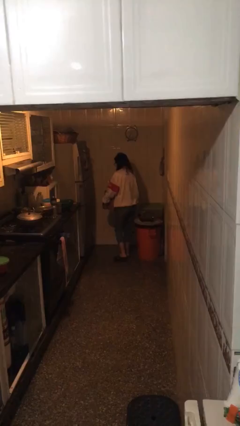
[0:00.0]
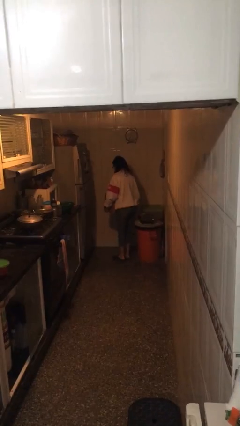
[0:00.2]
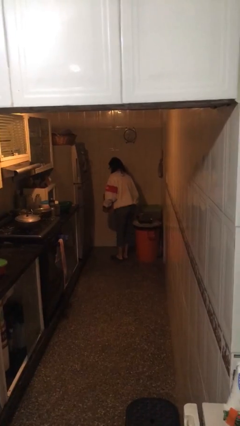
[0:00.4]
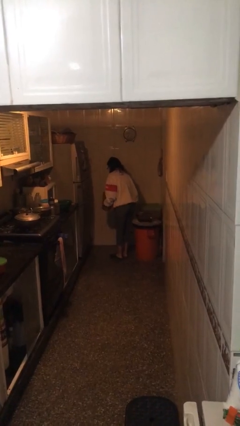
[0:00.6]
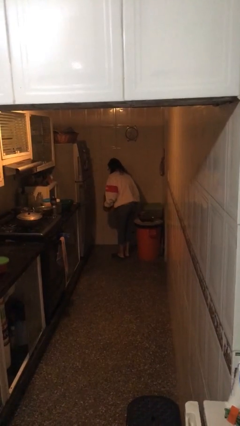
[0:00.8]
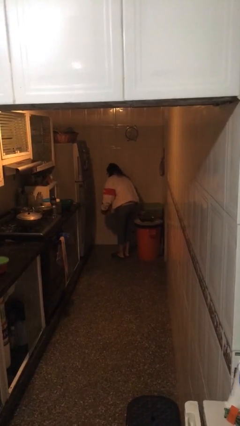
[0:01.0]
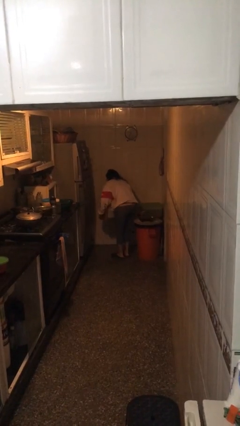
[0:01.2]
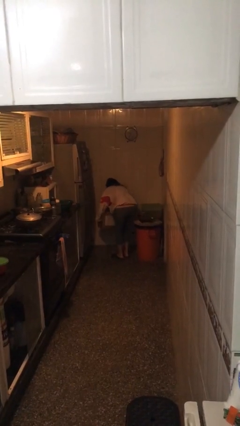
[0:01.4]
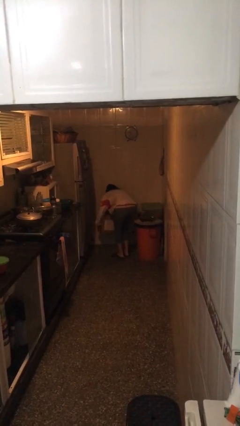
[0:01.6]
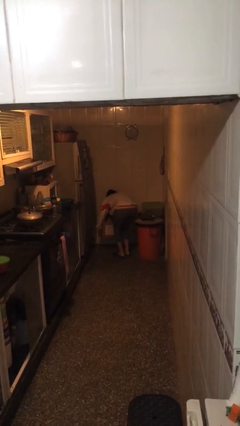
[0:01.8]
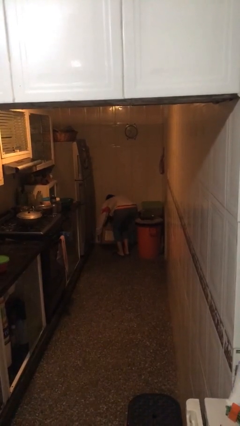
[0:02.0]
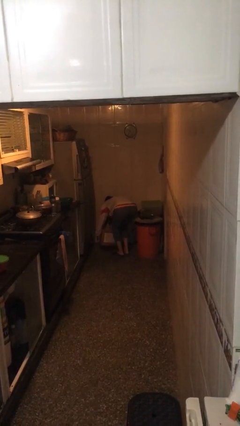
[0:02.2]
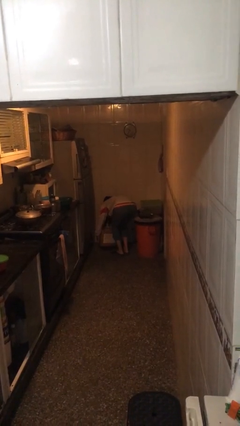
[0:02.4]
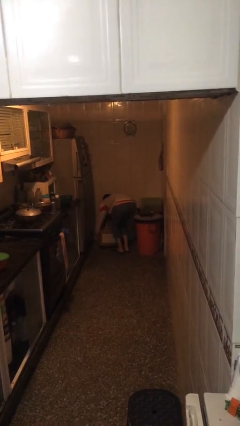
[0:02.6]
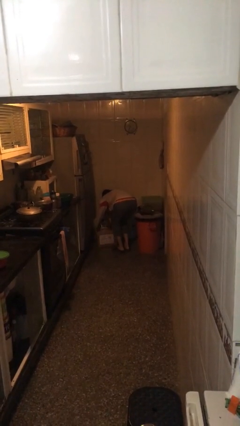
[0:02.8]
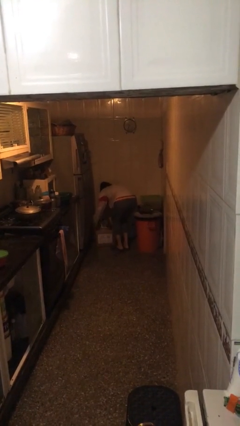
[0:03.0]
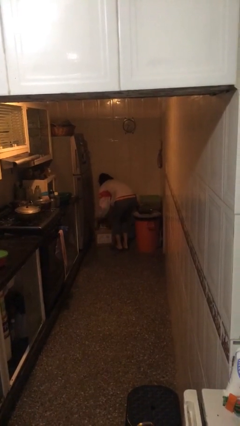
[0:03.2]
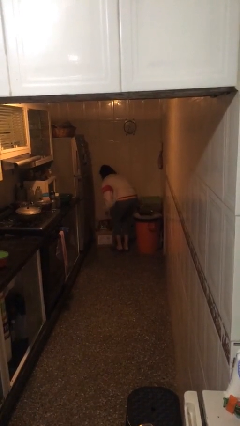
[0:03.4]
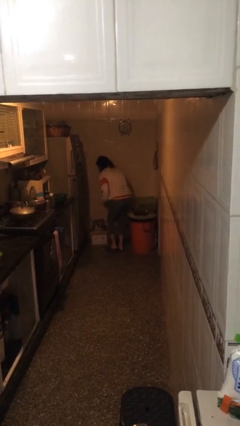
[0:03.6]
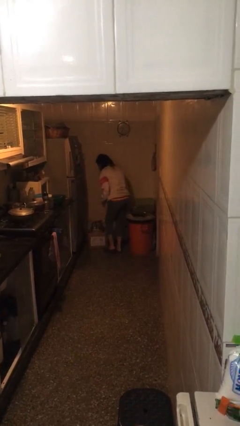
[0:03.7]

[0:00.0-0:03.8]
person puts down object on floor

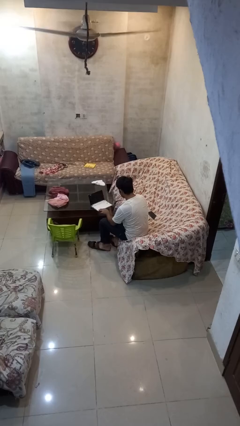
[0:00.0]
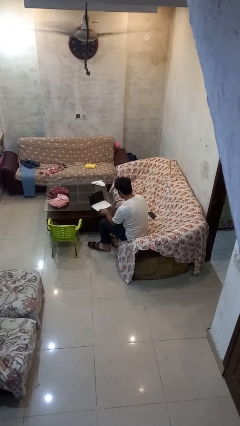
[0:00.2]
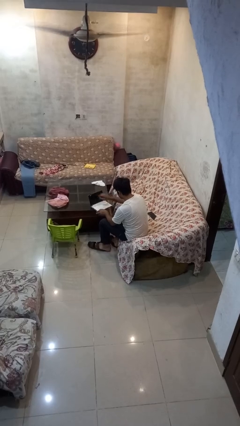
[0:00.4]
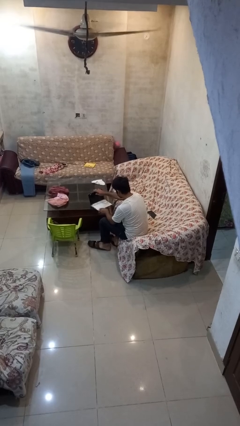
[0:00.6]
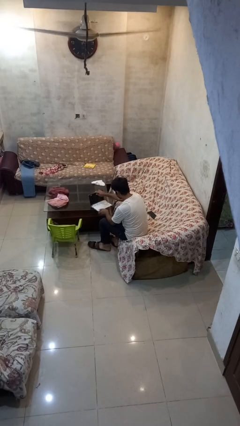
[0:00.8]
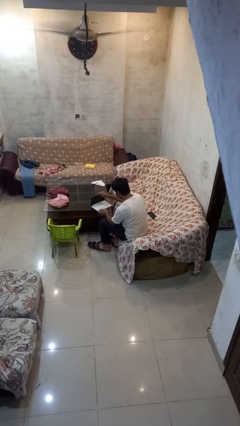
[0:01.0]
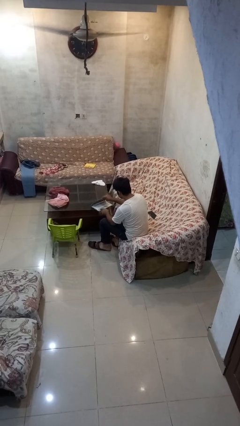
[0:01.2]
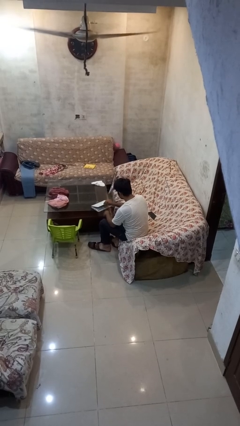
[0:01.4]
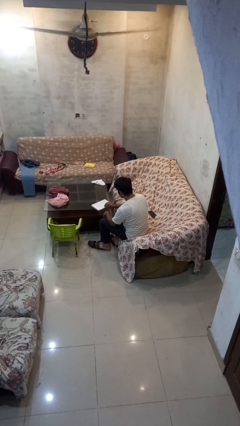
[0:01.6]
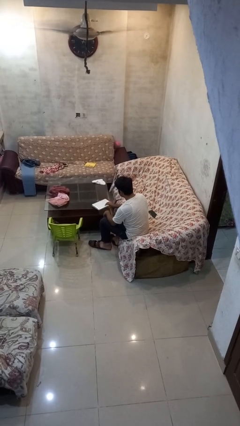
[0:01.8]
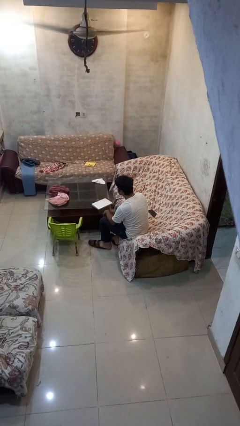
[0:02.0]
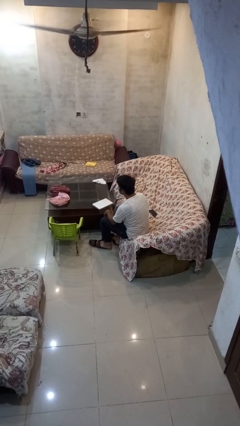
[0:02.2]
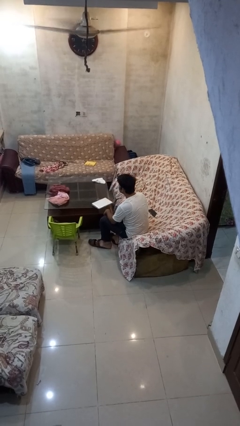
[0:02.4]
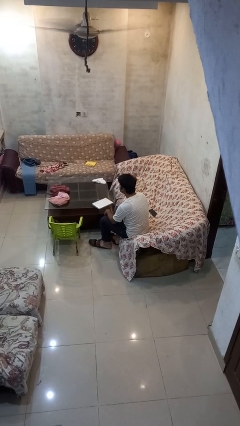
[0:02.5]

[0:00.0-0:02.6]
person closes laptop

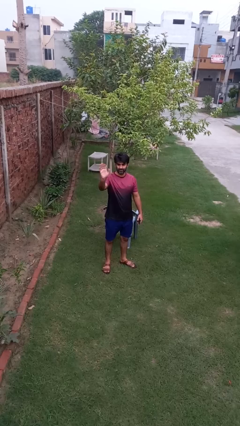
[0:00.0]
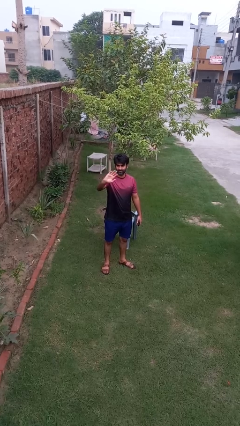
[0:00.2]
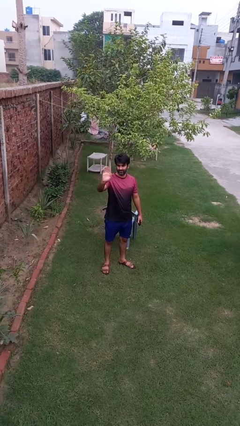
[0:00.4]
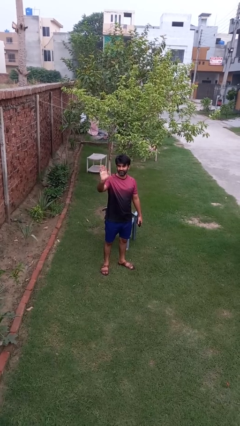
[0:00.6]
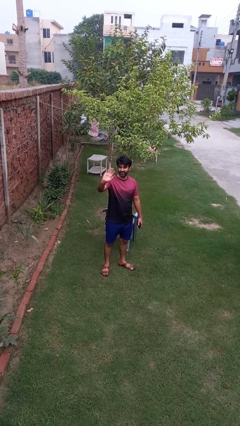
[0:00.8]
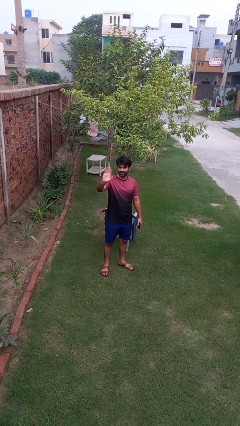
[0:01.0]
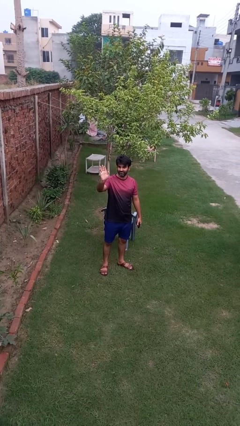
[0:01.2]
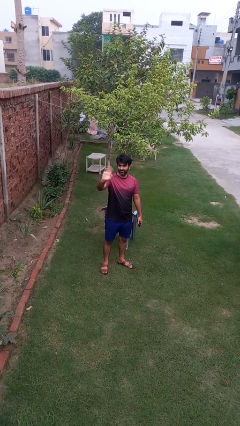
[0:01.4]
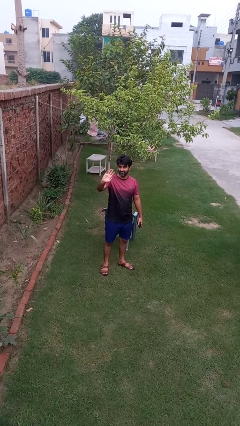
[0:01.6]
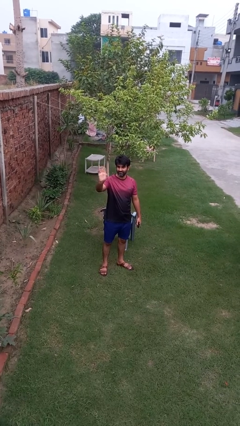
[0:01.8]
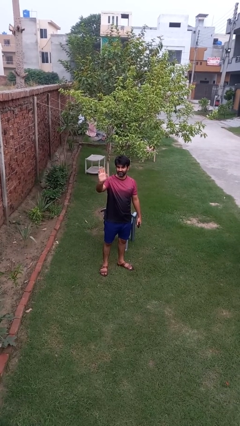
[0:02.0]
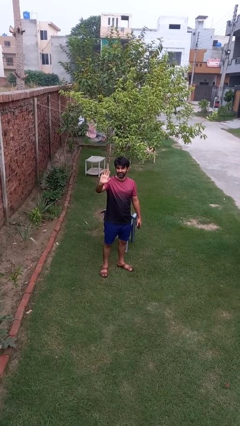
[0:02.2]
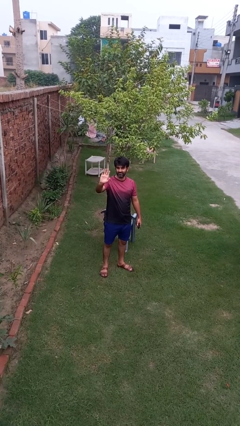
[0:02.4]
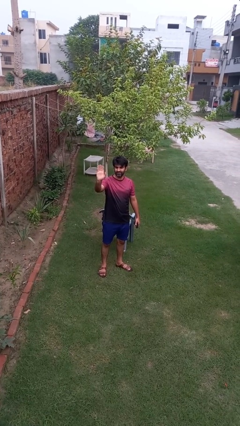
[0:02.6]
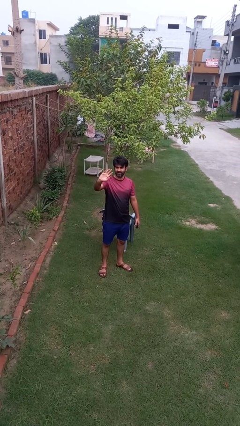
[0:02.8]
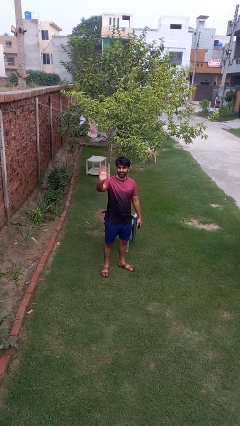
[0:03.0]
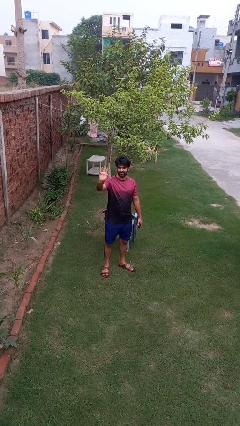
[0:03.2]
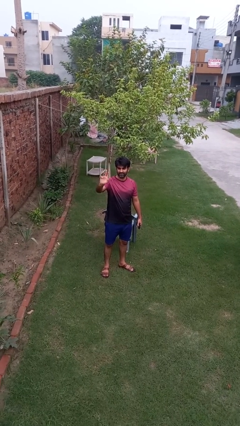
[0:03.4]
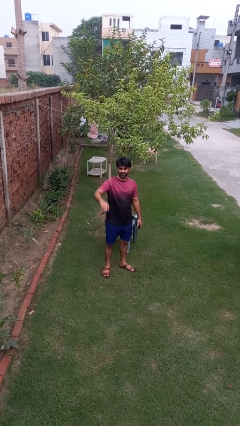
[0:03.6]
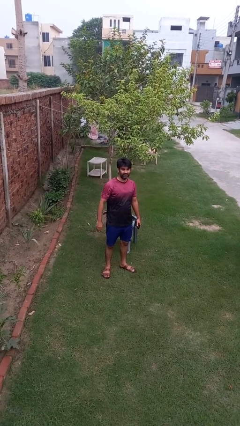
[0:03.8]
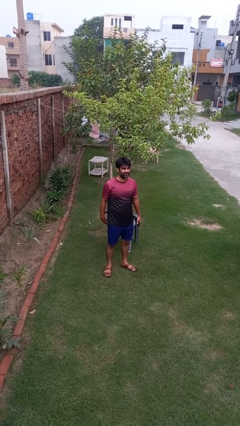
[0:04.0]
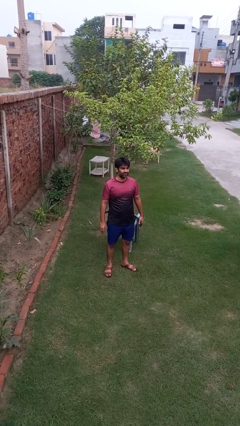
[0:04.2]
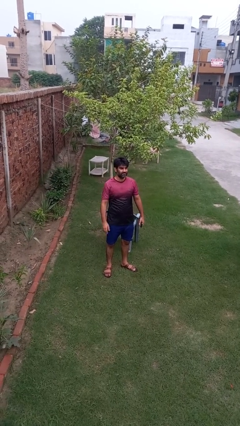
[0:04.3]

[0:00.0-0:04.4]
person waves at person

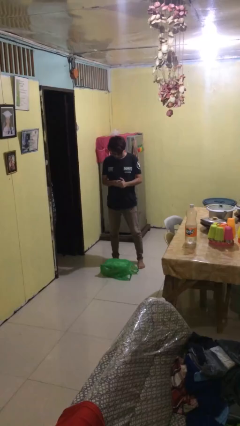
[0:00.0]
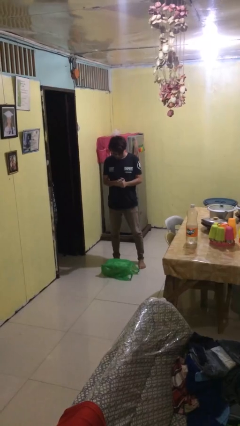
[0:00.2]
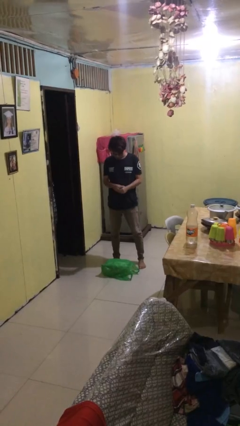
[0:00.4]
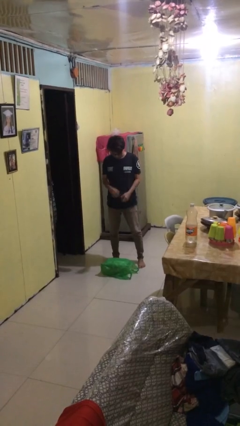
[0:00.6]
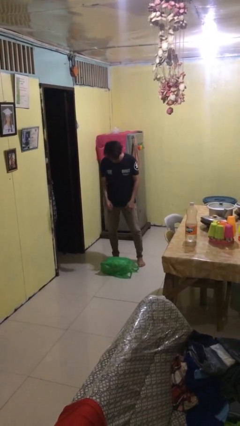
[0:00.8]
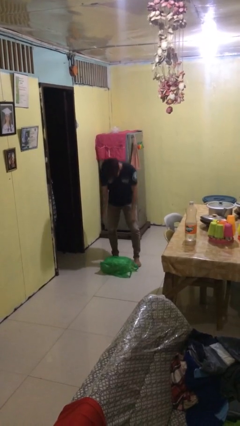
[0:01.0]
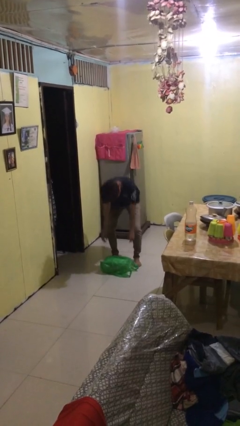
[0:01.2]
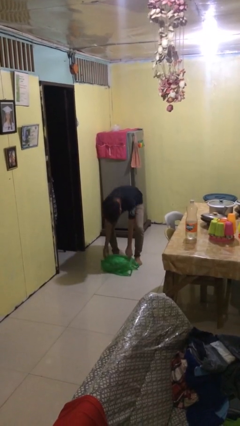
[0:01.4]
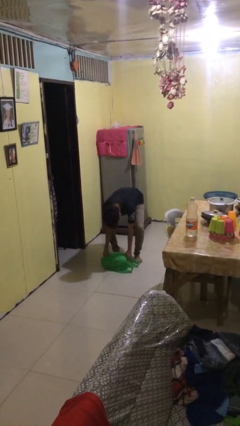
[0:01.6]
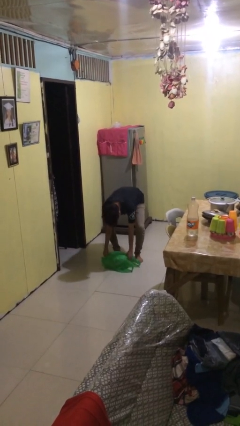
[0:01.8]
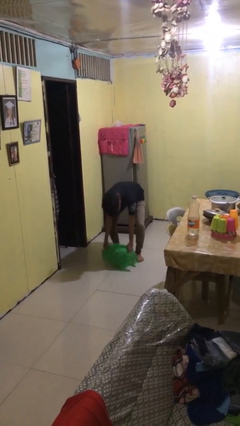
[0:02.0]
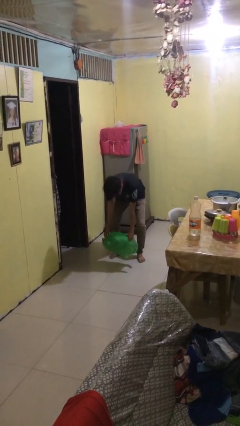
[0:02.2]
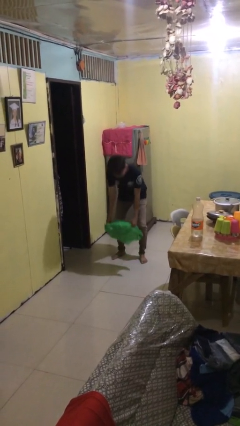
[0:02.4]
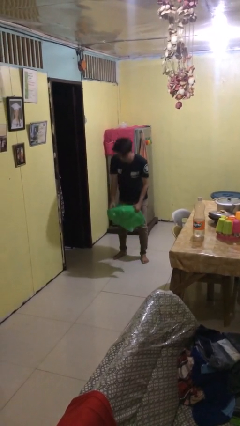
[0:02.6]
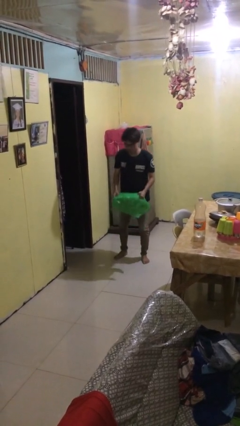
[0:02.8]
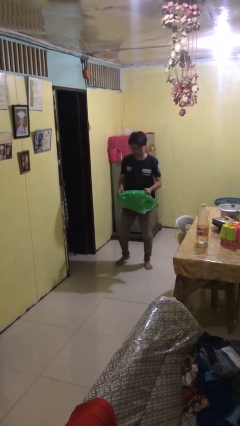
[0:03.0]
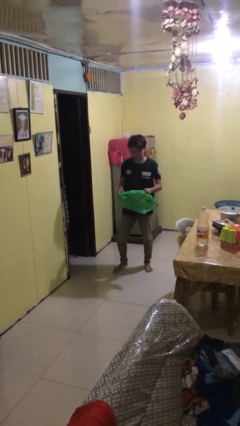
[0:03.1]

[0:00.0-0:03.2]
person picks up object from floor

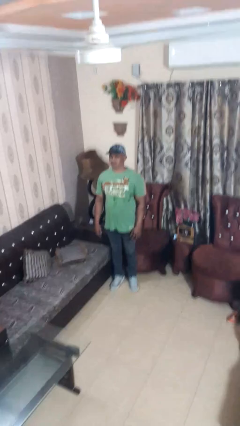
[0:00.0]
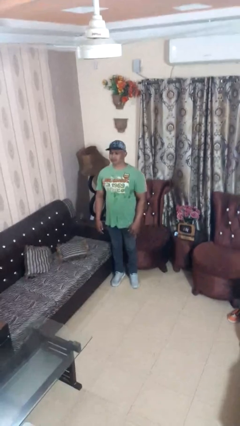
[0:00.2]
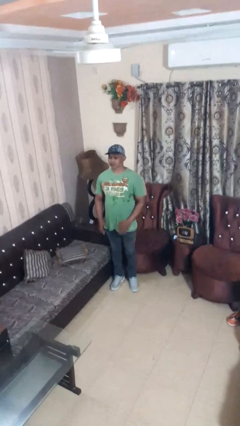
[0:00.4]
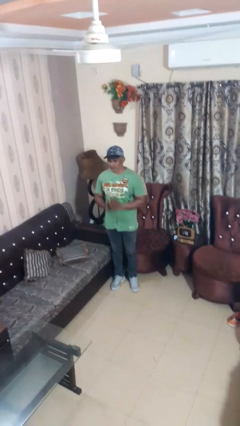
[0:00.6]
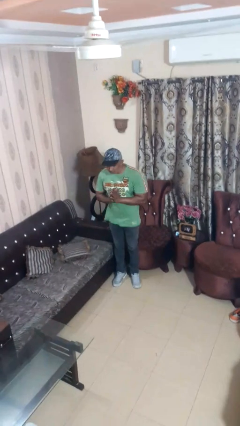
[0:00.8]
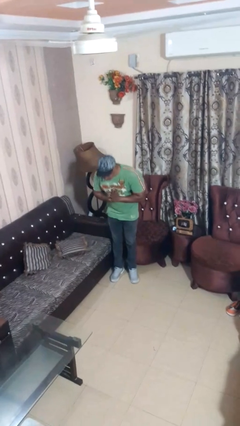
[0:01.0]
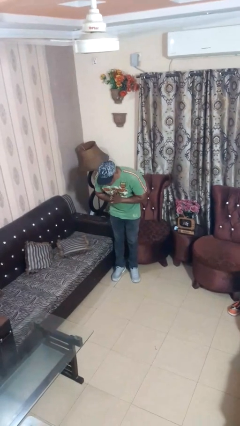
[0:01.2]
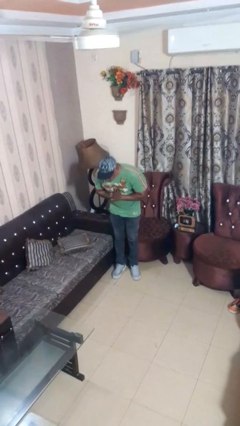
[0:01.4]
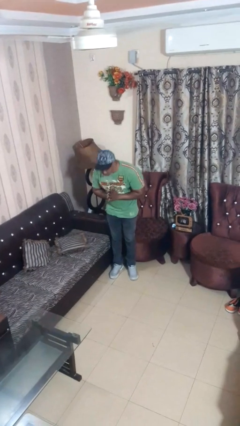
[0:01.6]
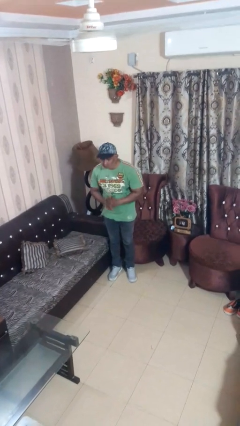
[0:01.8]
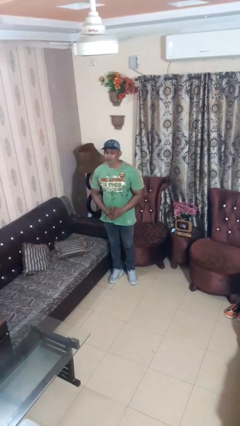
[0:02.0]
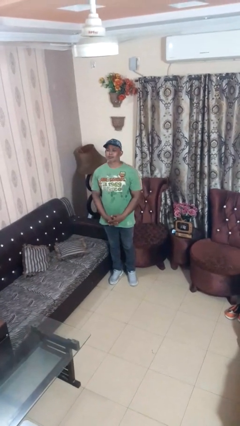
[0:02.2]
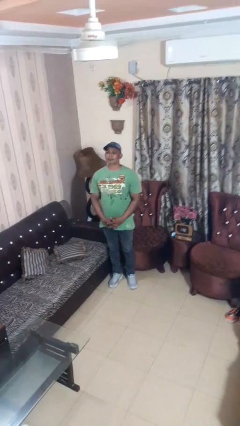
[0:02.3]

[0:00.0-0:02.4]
person bows

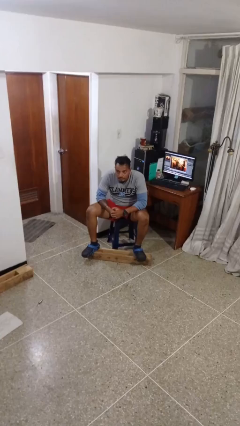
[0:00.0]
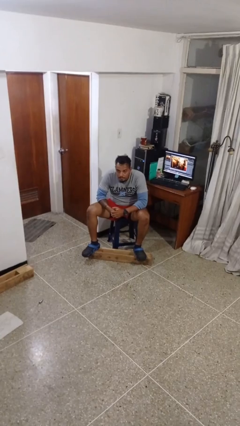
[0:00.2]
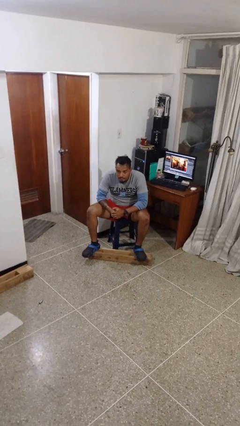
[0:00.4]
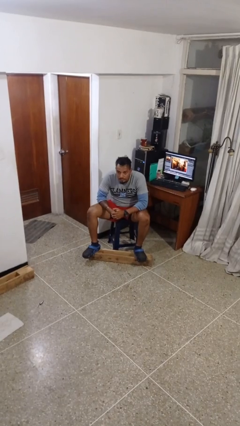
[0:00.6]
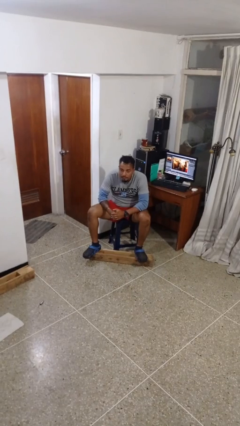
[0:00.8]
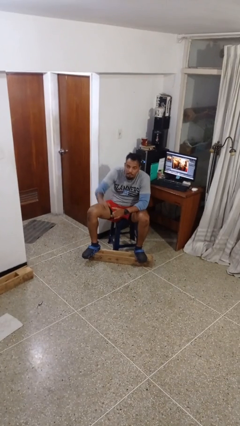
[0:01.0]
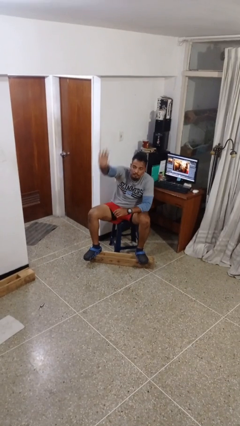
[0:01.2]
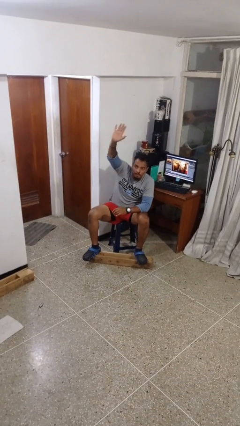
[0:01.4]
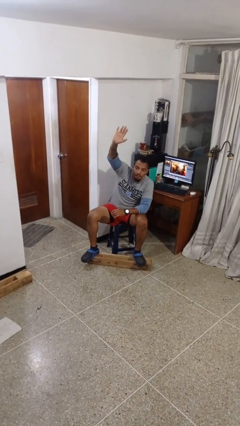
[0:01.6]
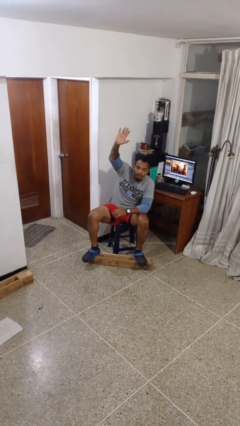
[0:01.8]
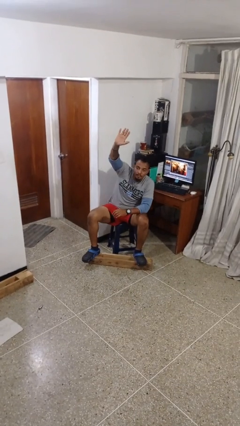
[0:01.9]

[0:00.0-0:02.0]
person gestures raise hand
